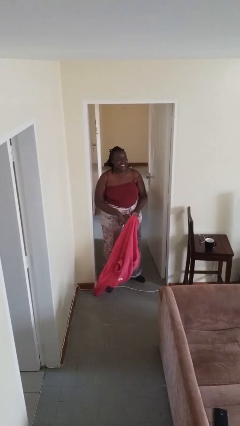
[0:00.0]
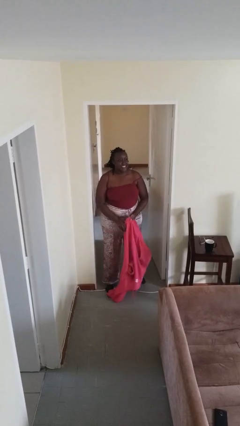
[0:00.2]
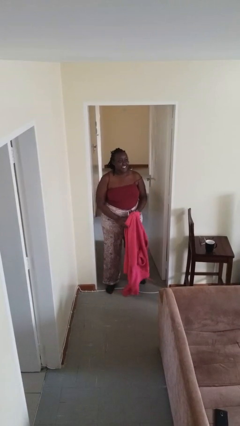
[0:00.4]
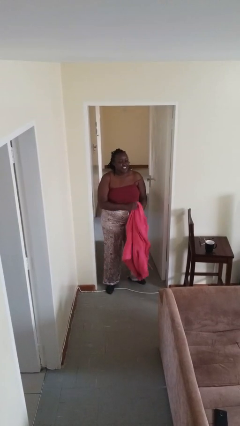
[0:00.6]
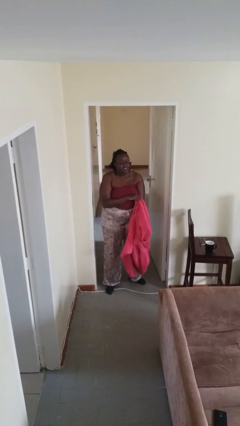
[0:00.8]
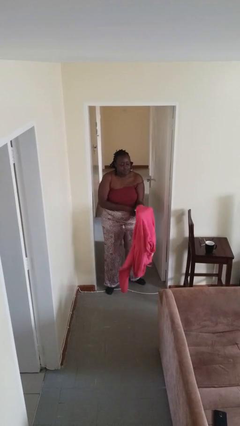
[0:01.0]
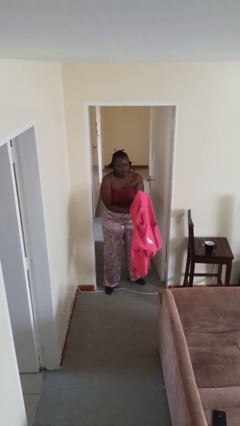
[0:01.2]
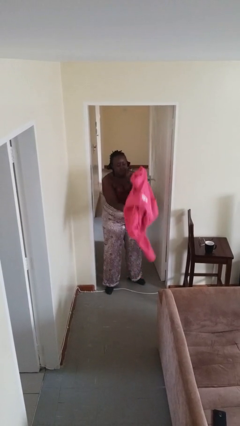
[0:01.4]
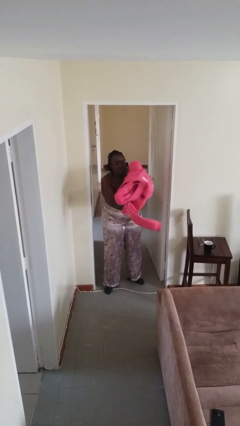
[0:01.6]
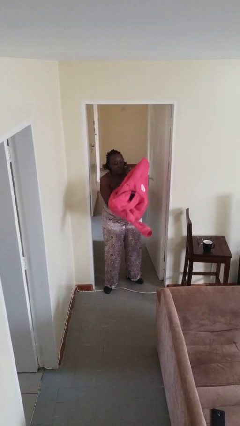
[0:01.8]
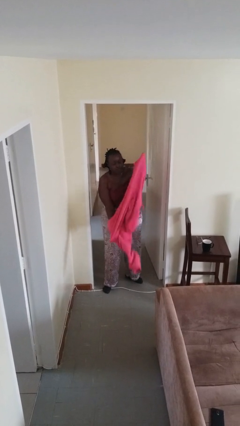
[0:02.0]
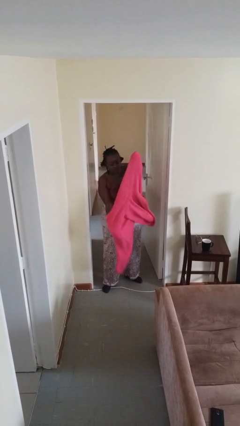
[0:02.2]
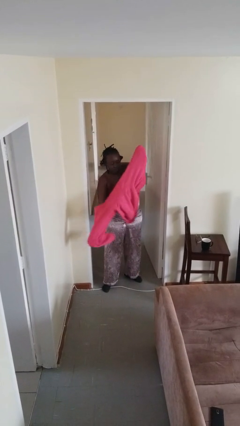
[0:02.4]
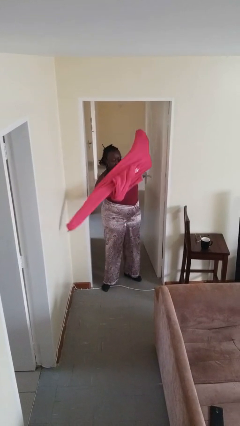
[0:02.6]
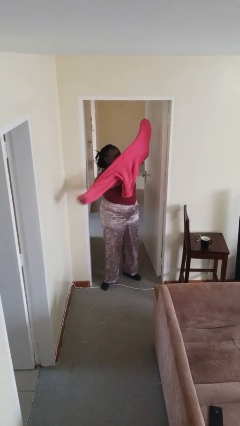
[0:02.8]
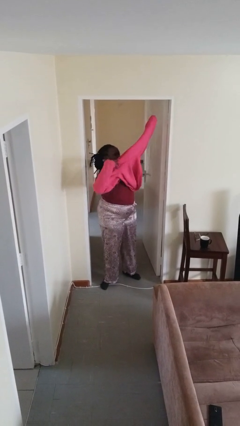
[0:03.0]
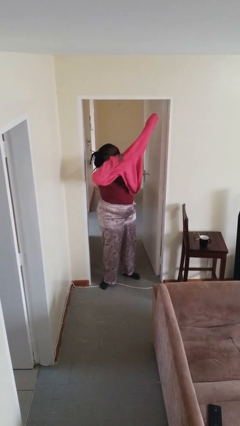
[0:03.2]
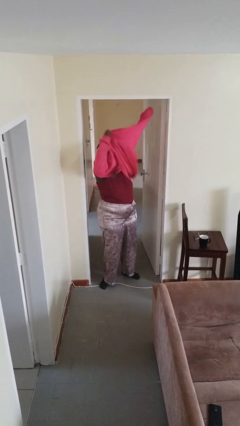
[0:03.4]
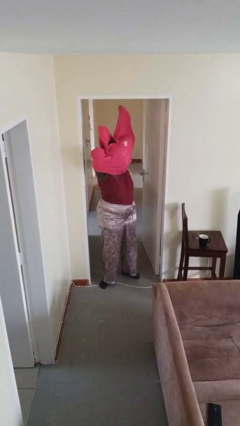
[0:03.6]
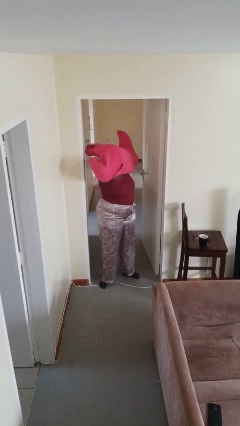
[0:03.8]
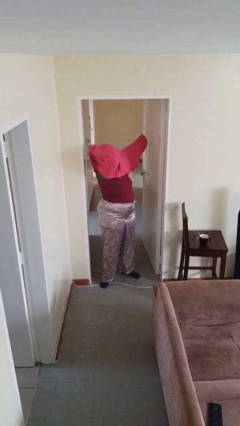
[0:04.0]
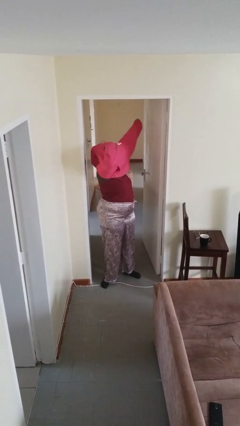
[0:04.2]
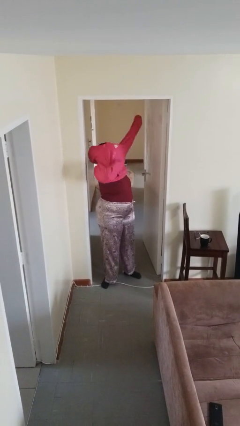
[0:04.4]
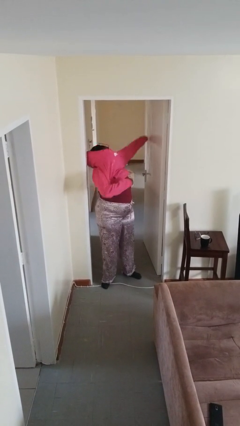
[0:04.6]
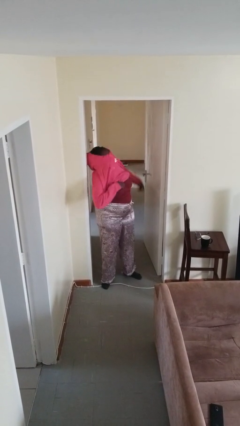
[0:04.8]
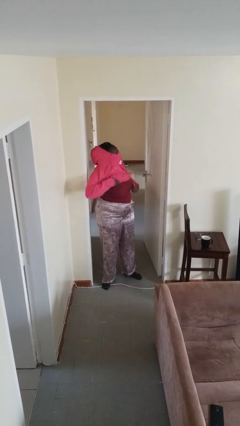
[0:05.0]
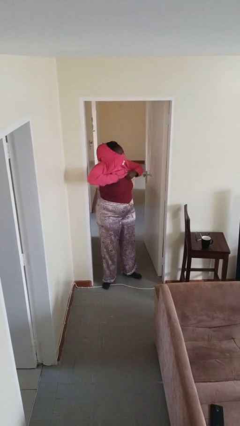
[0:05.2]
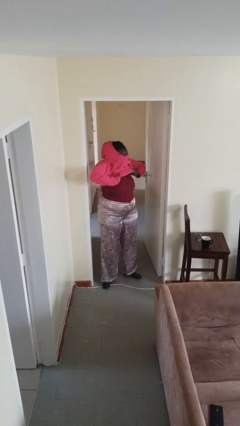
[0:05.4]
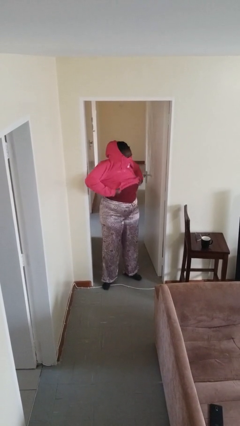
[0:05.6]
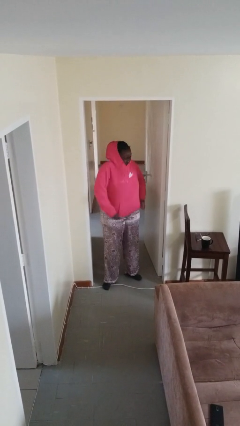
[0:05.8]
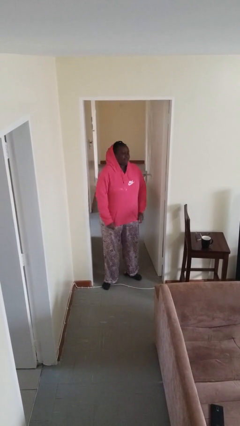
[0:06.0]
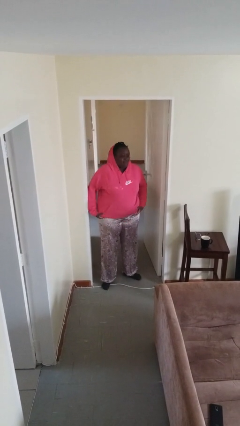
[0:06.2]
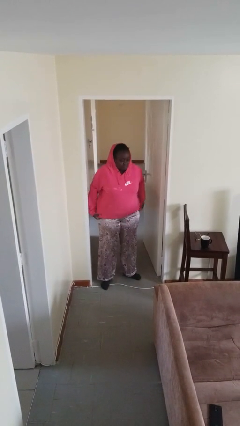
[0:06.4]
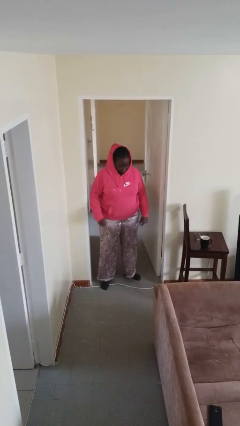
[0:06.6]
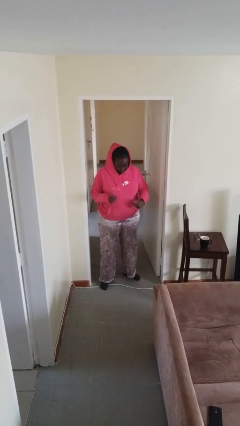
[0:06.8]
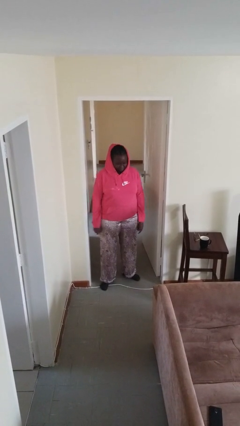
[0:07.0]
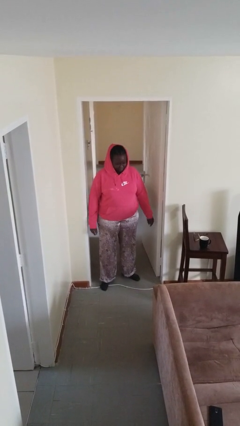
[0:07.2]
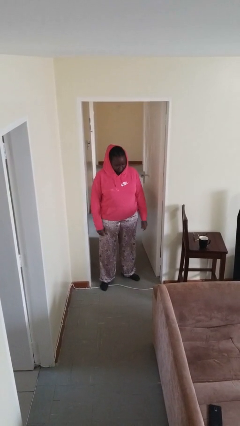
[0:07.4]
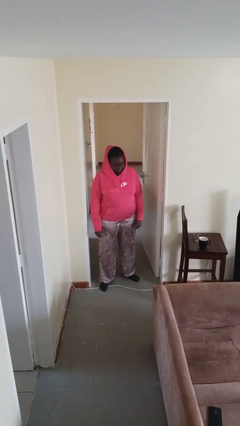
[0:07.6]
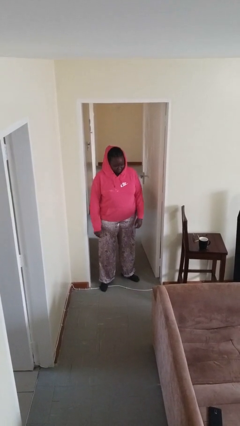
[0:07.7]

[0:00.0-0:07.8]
person puts on hoodie

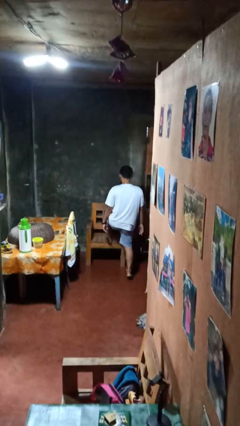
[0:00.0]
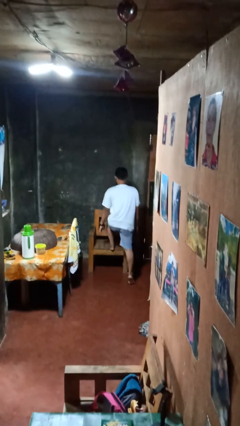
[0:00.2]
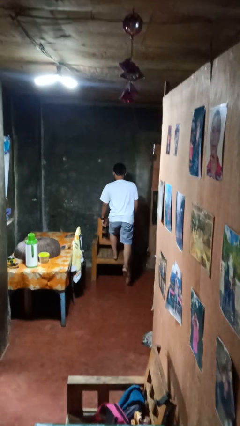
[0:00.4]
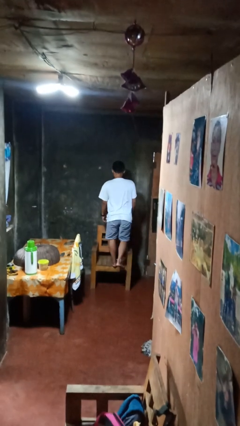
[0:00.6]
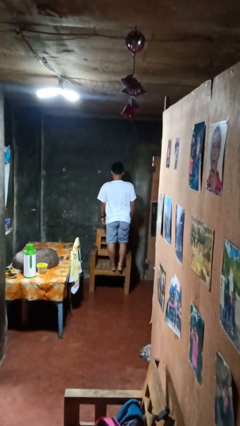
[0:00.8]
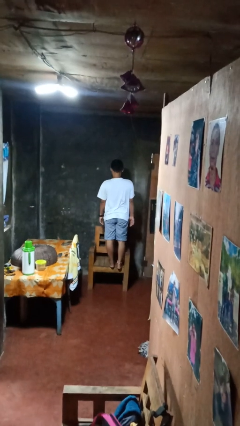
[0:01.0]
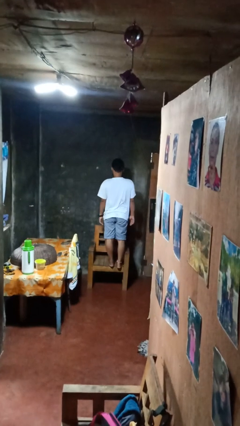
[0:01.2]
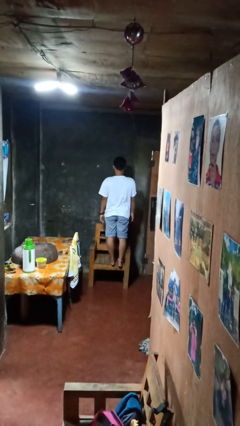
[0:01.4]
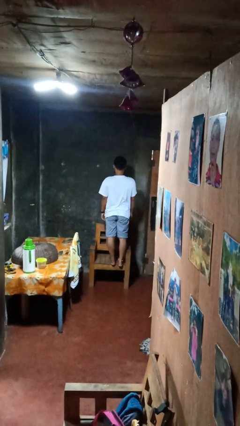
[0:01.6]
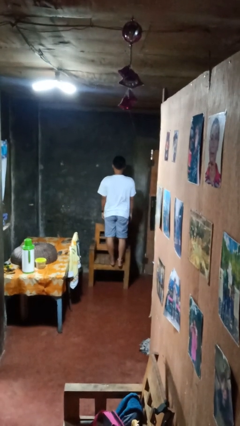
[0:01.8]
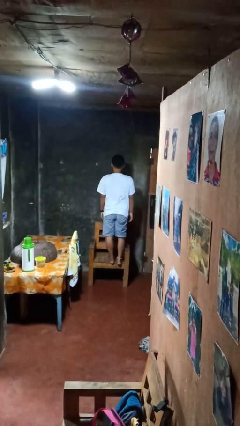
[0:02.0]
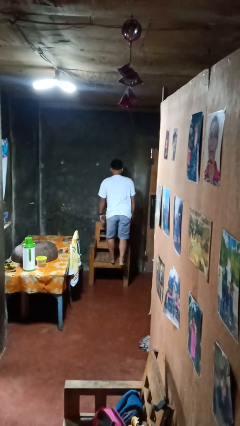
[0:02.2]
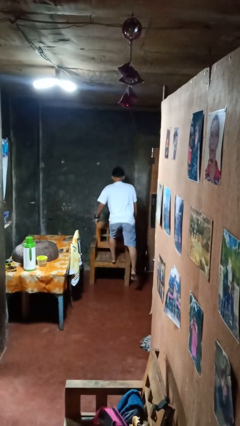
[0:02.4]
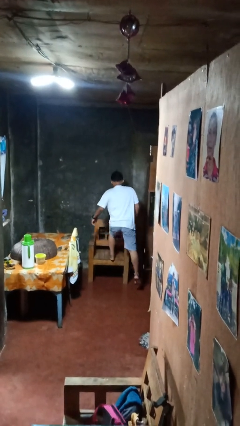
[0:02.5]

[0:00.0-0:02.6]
person climbs on chair

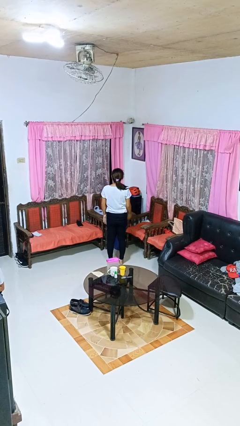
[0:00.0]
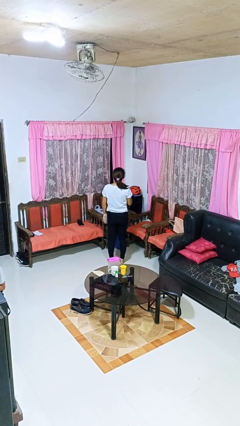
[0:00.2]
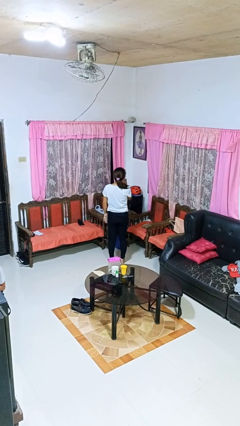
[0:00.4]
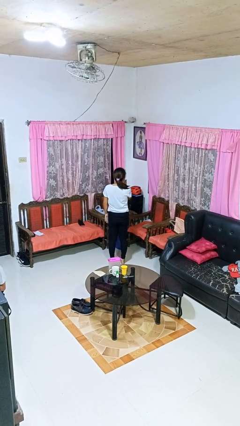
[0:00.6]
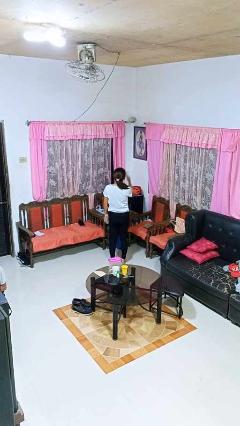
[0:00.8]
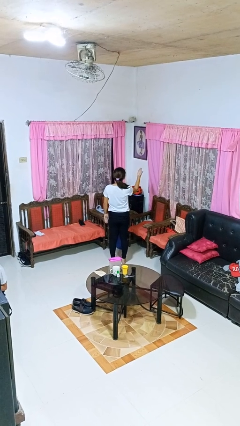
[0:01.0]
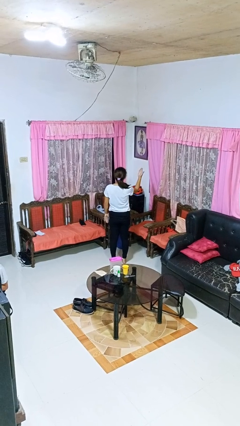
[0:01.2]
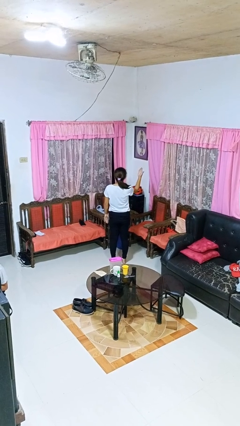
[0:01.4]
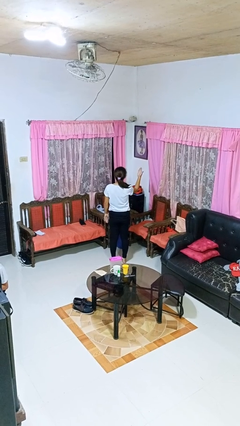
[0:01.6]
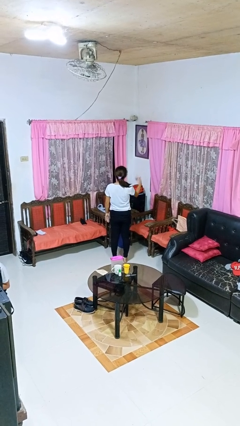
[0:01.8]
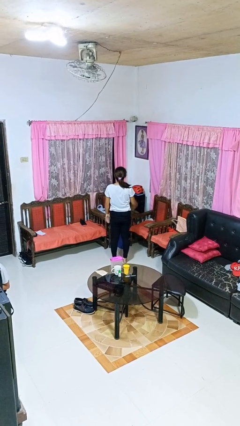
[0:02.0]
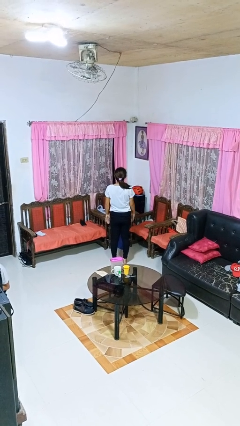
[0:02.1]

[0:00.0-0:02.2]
person gestures blow kiss

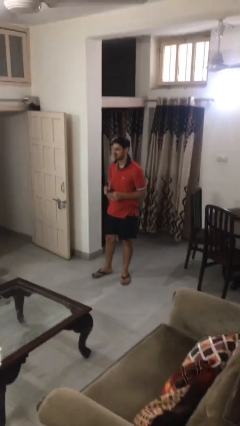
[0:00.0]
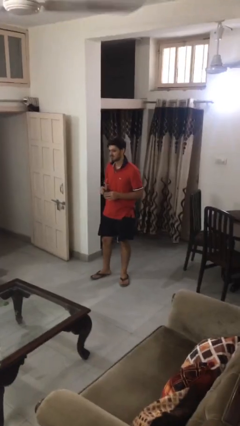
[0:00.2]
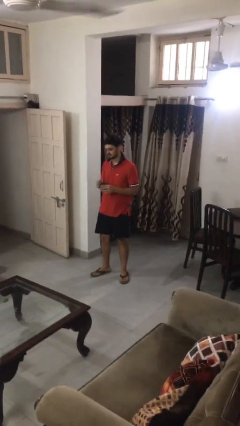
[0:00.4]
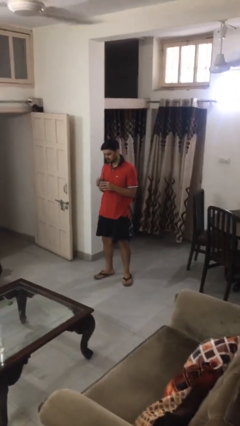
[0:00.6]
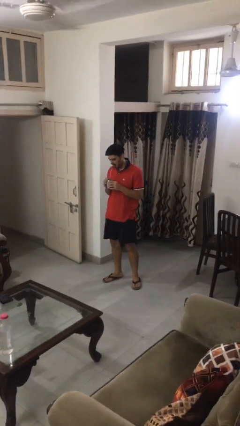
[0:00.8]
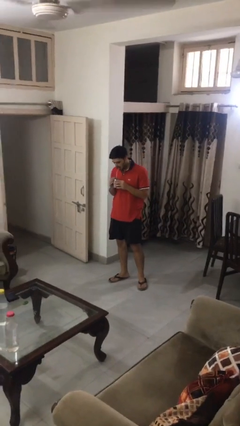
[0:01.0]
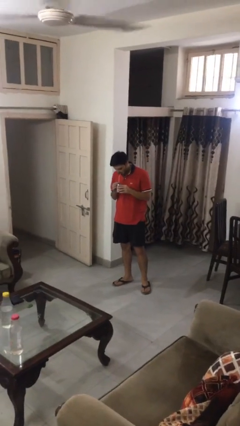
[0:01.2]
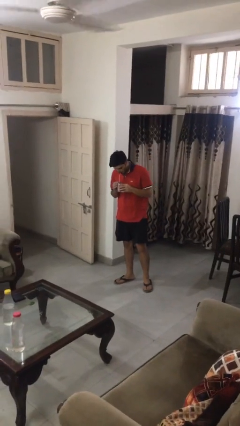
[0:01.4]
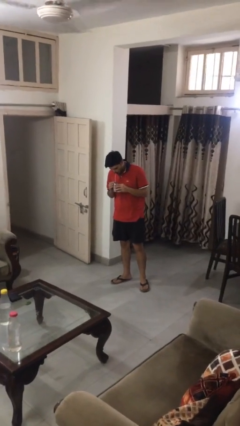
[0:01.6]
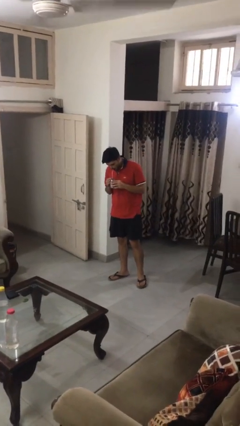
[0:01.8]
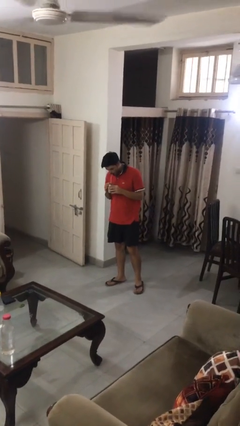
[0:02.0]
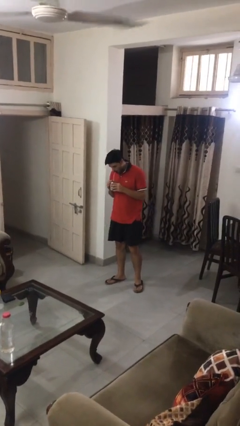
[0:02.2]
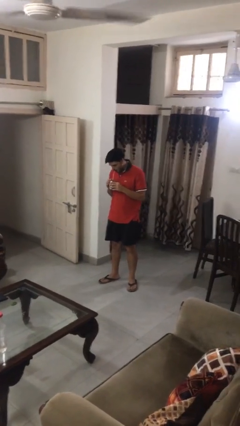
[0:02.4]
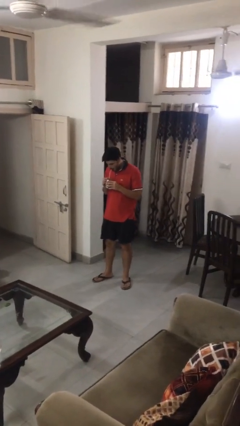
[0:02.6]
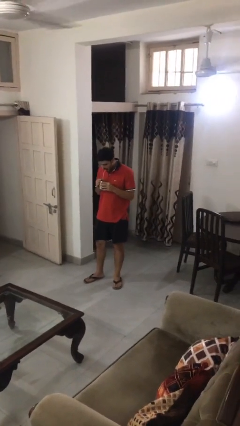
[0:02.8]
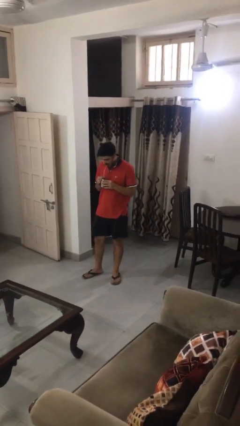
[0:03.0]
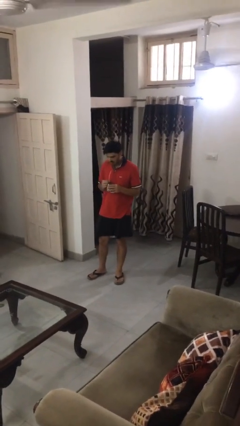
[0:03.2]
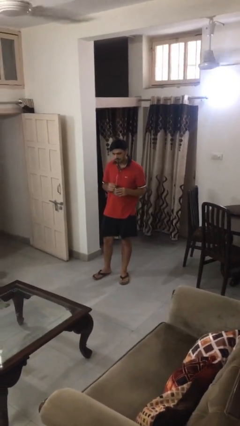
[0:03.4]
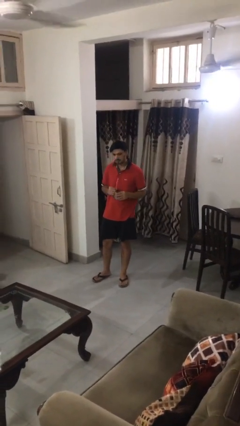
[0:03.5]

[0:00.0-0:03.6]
person drinks from straw

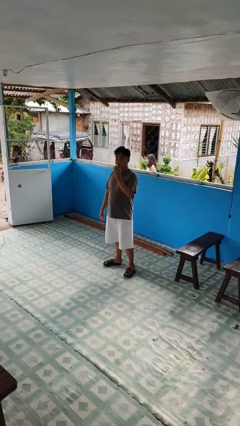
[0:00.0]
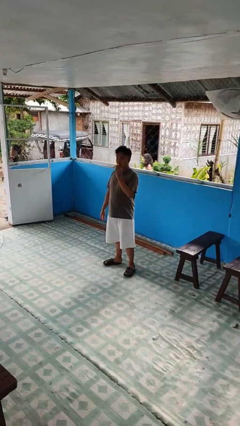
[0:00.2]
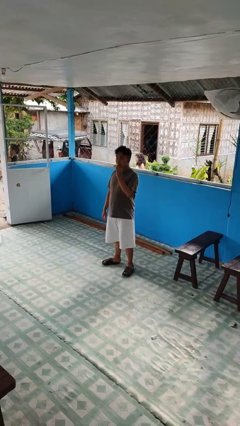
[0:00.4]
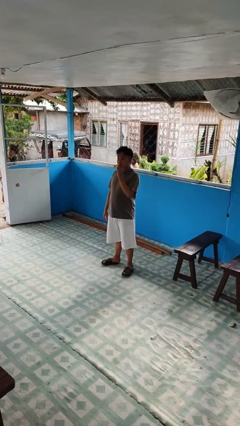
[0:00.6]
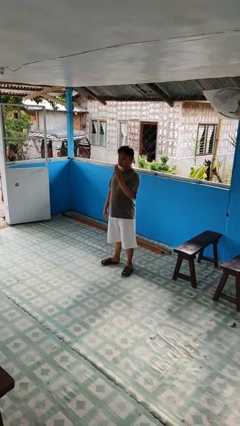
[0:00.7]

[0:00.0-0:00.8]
person eats banana

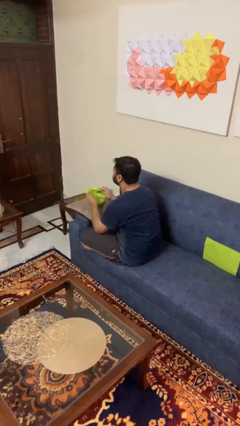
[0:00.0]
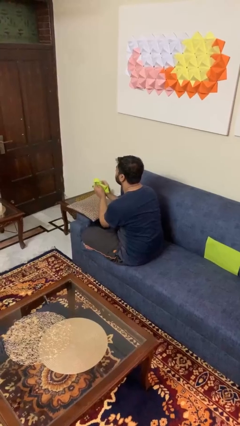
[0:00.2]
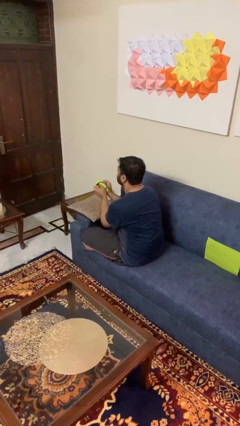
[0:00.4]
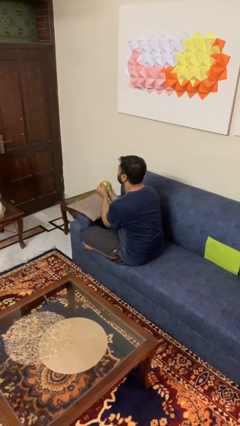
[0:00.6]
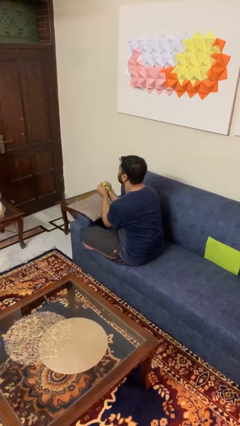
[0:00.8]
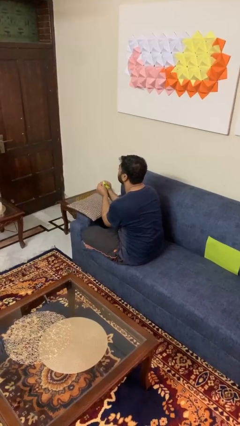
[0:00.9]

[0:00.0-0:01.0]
person crumples paper

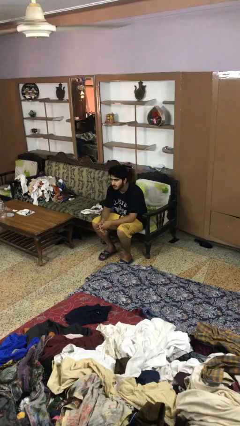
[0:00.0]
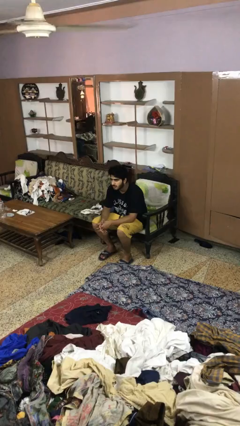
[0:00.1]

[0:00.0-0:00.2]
person gestures thumbs down
